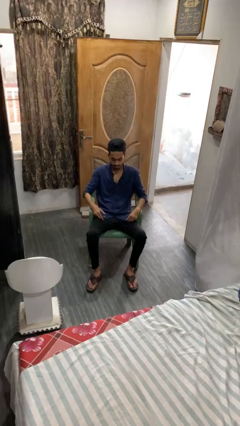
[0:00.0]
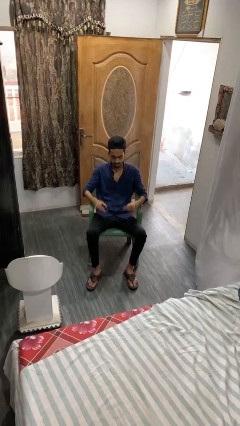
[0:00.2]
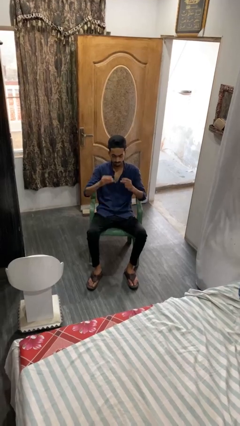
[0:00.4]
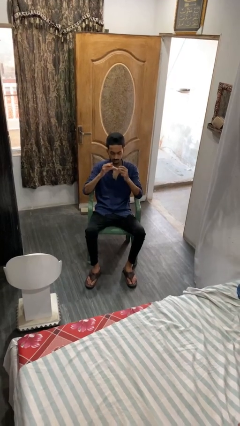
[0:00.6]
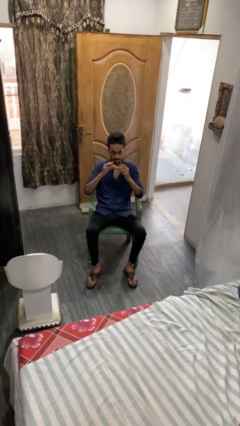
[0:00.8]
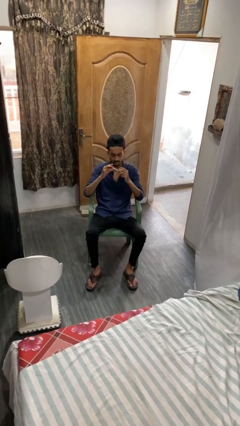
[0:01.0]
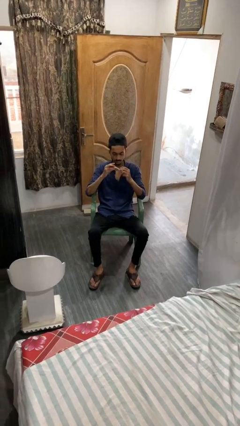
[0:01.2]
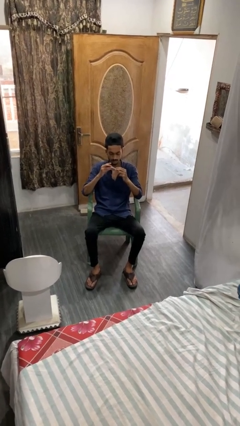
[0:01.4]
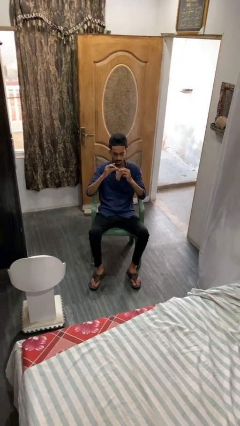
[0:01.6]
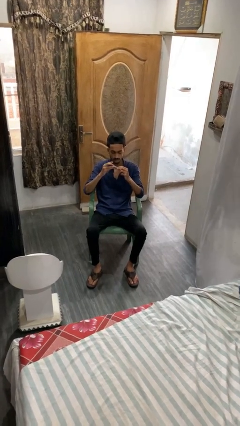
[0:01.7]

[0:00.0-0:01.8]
person clips fingernails

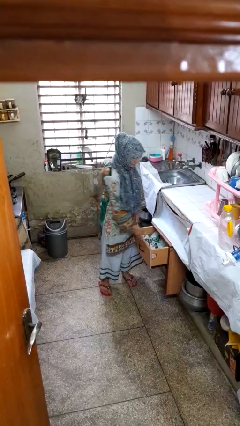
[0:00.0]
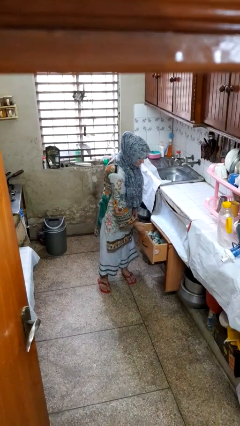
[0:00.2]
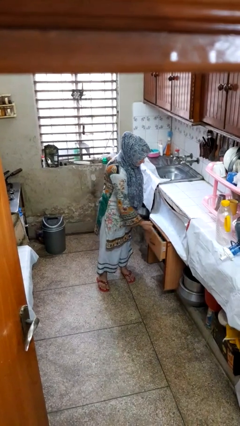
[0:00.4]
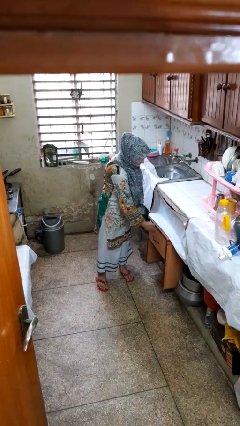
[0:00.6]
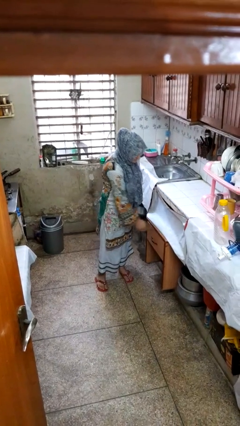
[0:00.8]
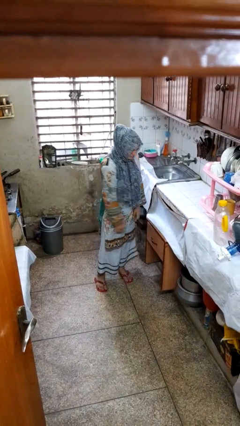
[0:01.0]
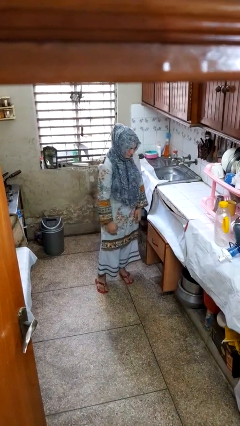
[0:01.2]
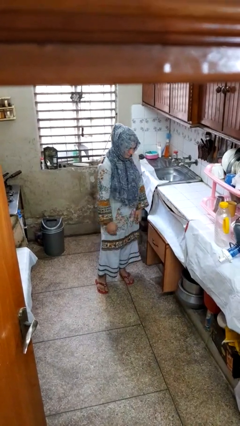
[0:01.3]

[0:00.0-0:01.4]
person closes kitchen drawer

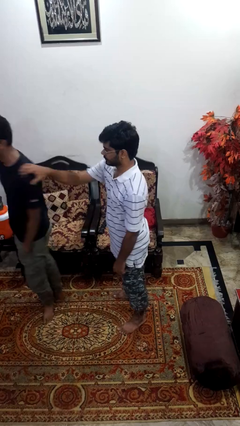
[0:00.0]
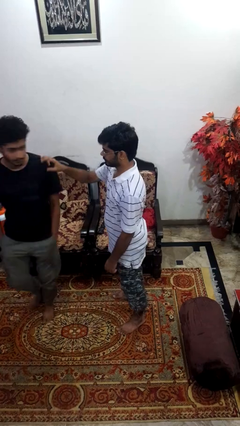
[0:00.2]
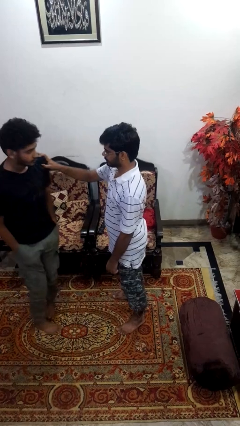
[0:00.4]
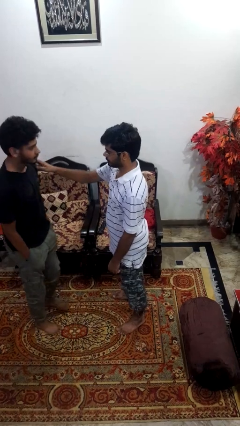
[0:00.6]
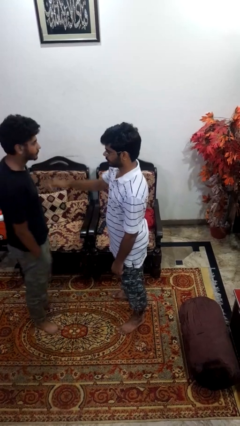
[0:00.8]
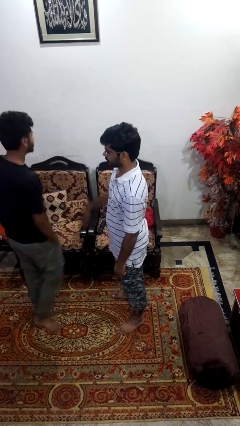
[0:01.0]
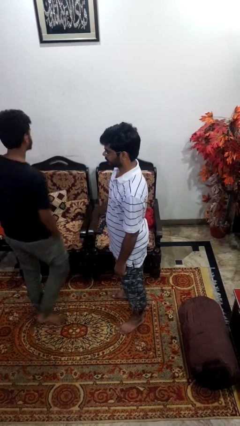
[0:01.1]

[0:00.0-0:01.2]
person spins person around

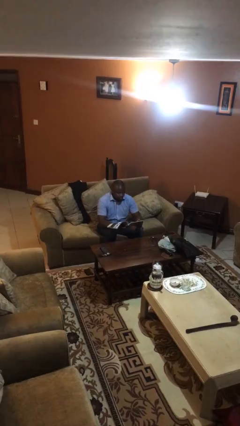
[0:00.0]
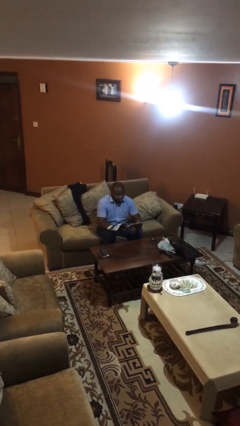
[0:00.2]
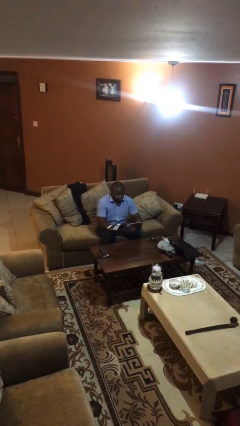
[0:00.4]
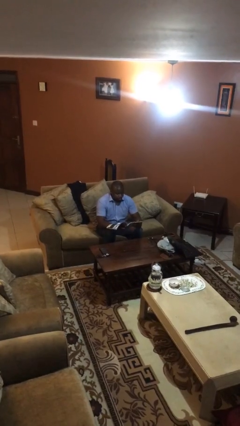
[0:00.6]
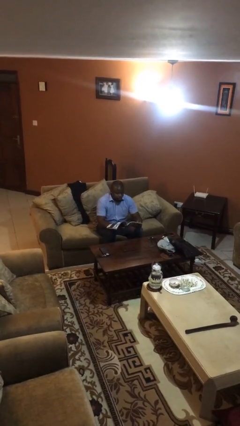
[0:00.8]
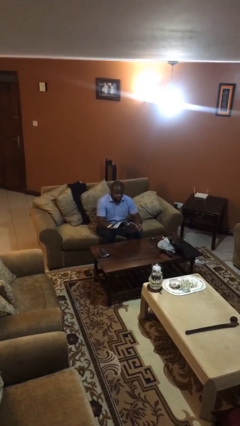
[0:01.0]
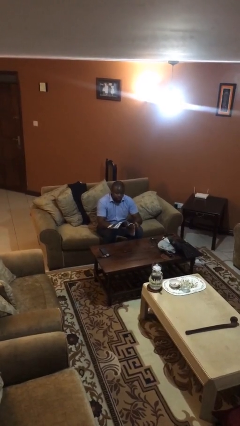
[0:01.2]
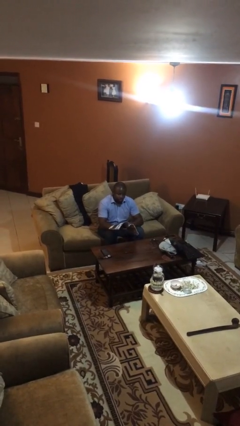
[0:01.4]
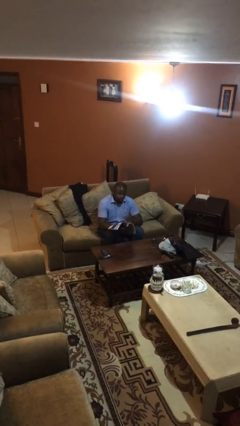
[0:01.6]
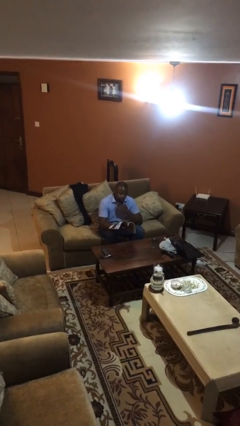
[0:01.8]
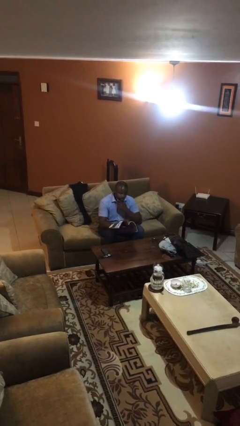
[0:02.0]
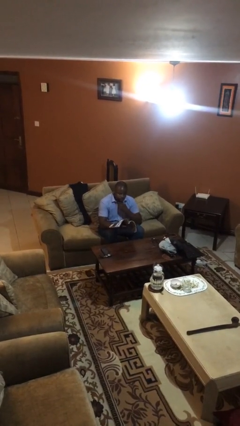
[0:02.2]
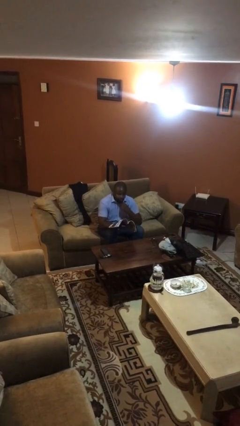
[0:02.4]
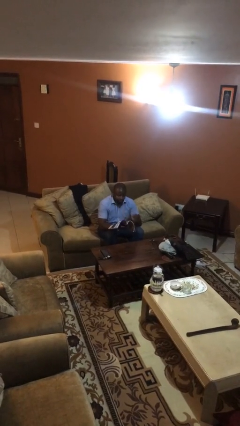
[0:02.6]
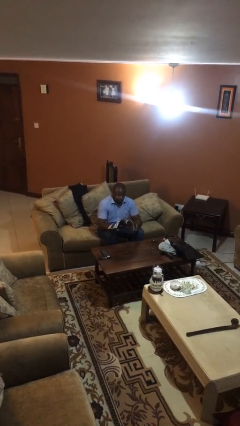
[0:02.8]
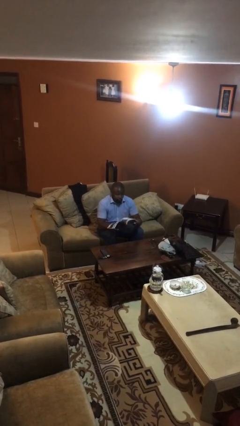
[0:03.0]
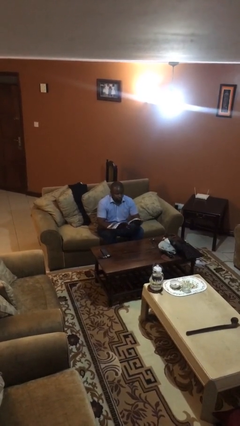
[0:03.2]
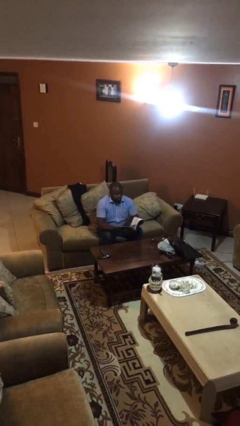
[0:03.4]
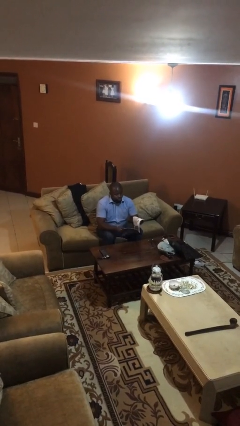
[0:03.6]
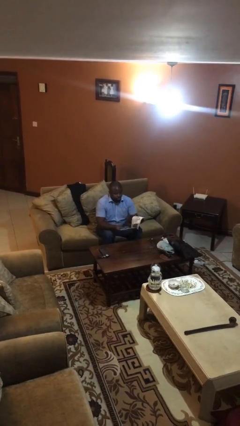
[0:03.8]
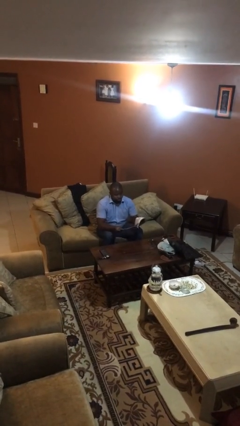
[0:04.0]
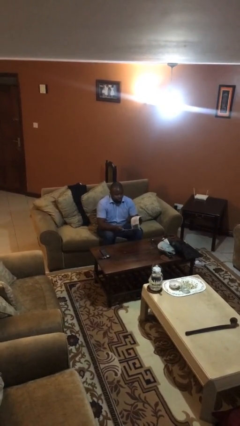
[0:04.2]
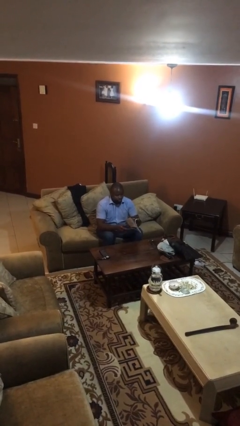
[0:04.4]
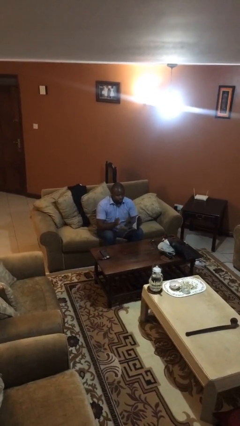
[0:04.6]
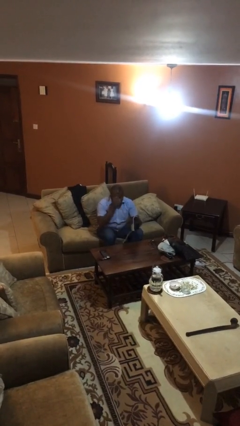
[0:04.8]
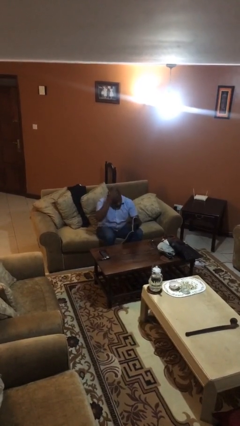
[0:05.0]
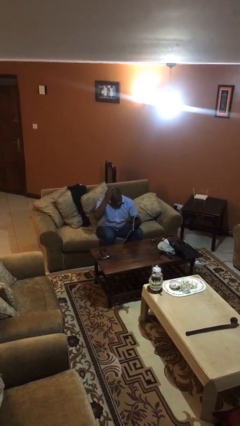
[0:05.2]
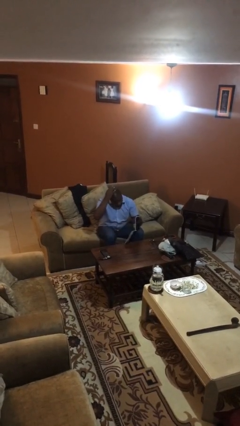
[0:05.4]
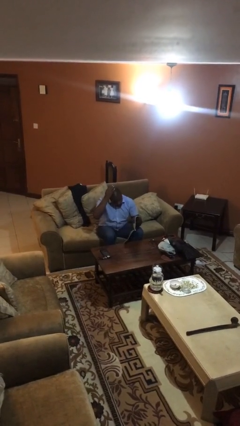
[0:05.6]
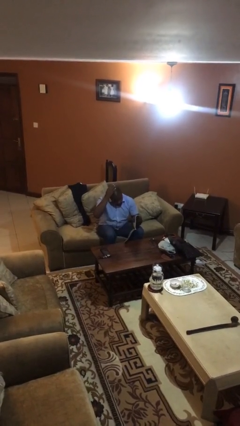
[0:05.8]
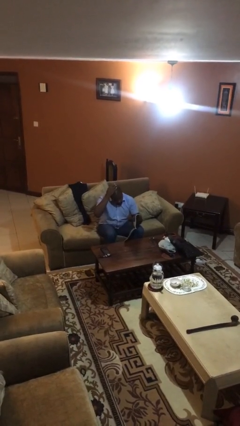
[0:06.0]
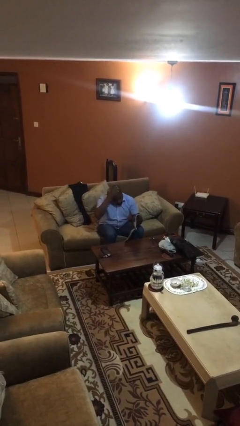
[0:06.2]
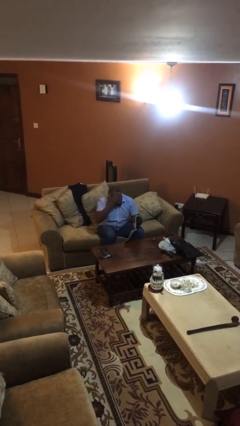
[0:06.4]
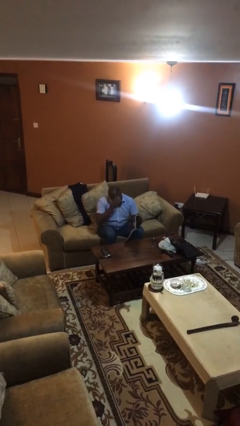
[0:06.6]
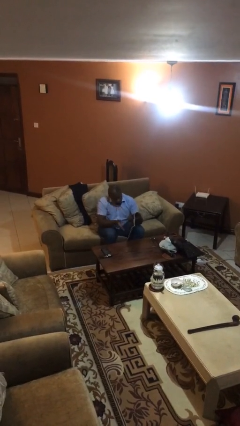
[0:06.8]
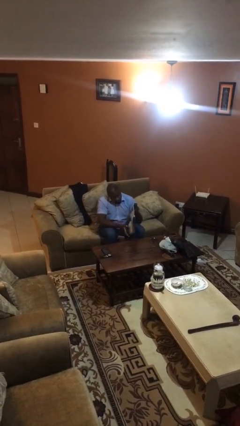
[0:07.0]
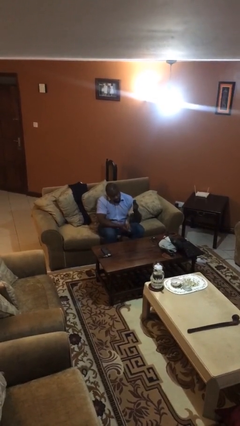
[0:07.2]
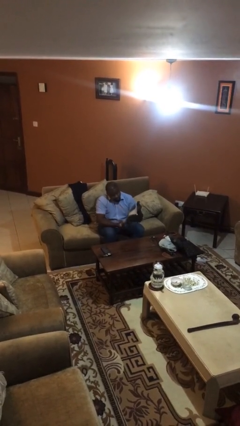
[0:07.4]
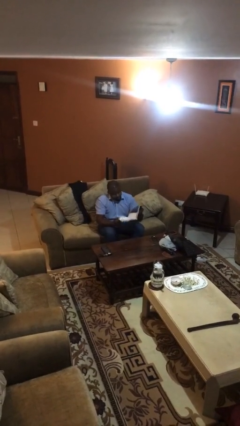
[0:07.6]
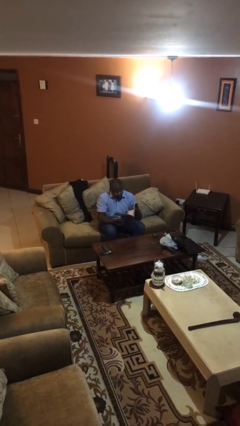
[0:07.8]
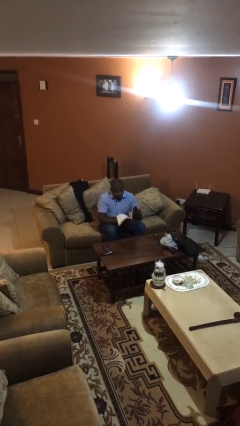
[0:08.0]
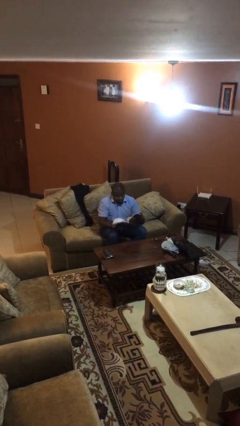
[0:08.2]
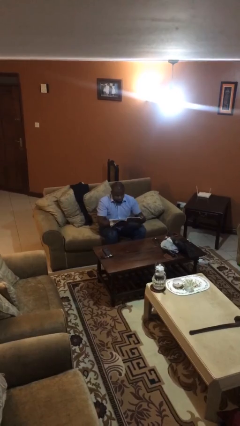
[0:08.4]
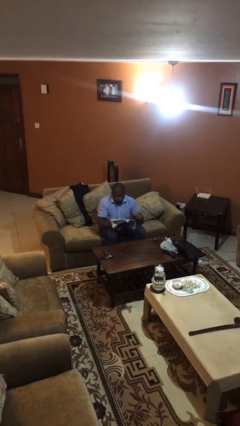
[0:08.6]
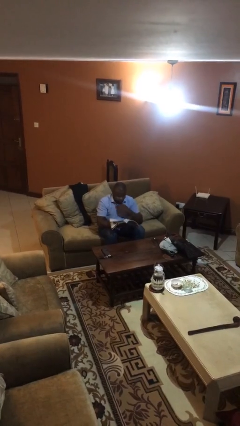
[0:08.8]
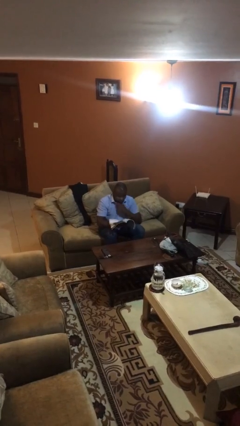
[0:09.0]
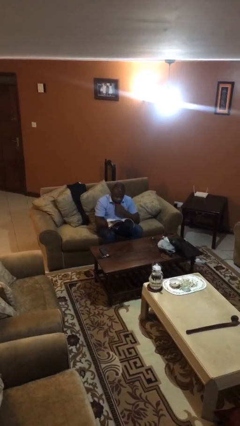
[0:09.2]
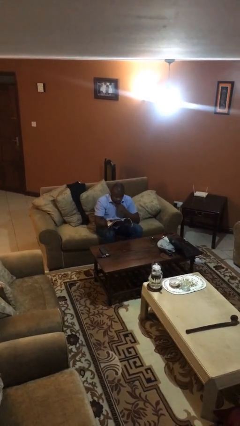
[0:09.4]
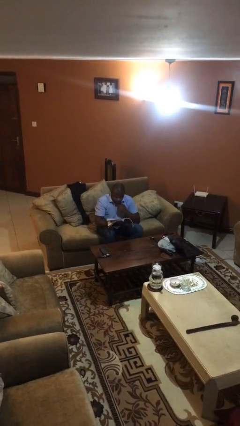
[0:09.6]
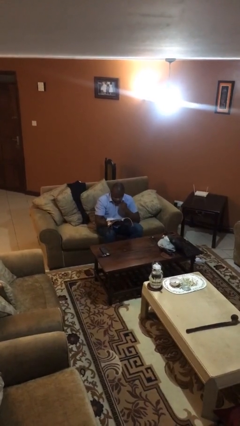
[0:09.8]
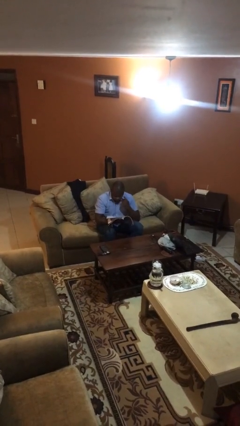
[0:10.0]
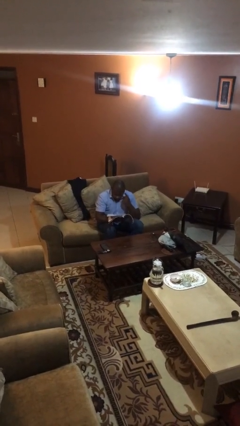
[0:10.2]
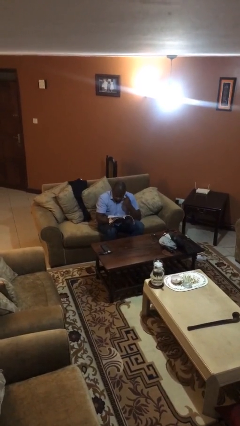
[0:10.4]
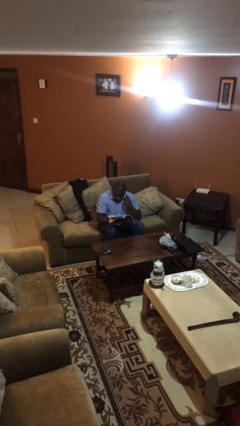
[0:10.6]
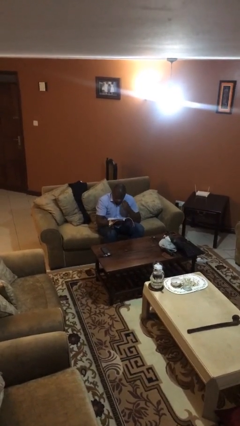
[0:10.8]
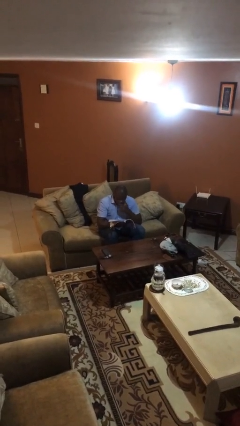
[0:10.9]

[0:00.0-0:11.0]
person reads document

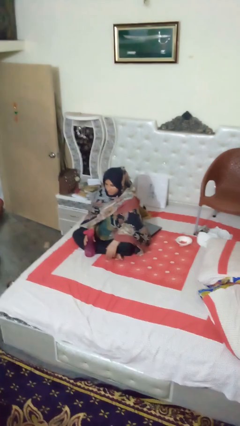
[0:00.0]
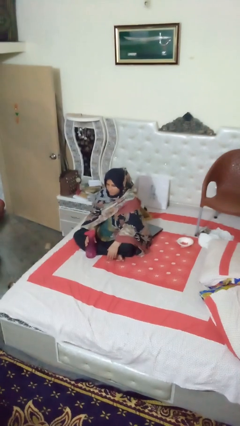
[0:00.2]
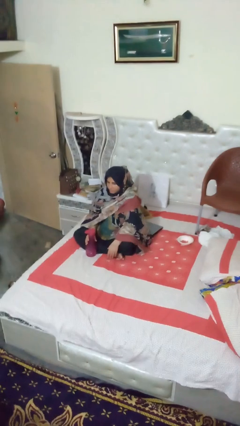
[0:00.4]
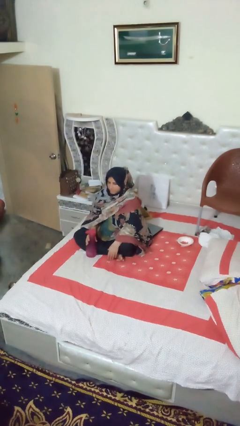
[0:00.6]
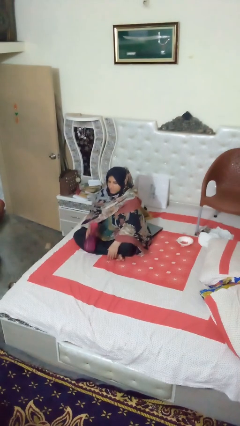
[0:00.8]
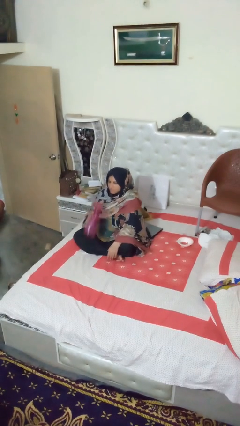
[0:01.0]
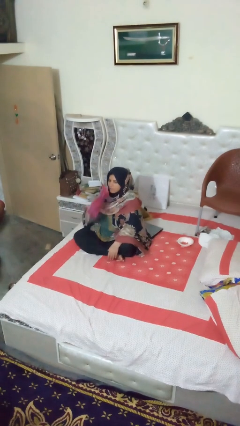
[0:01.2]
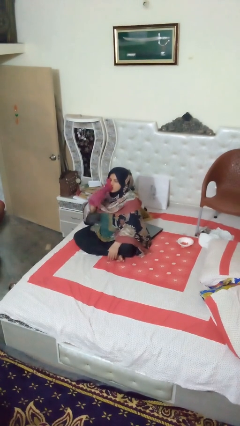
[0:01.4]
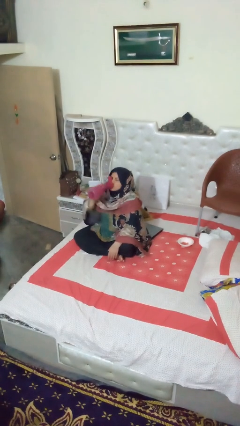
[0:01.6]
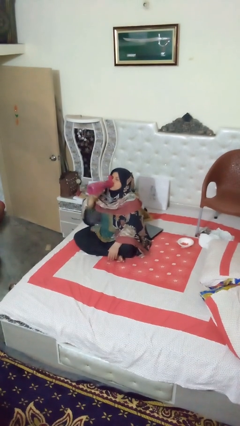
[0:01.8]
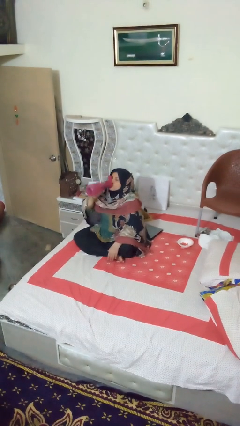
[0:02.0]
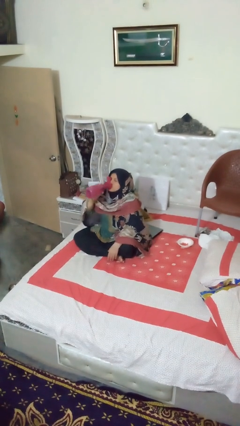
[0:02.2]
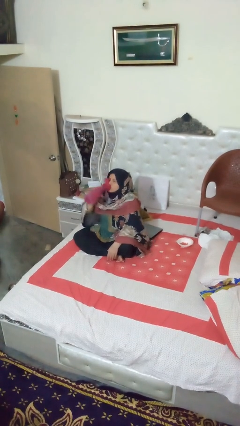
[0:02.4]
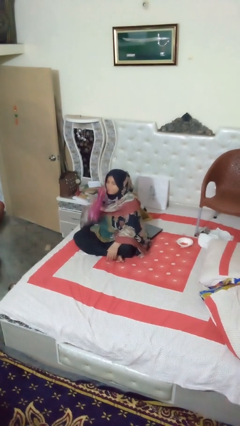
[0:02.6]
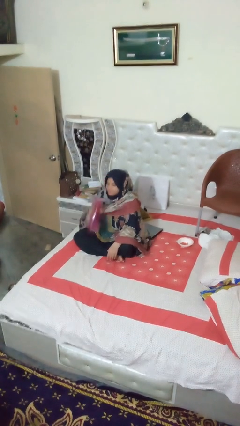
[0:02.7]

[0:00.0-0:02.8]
person drinks from bottle
